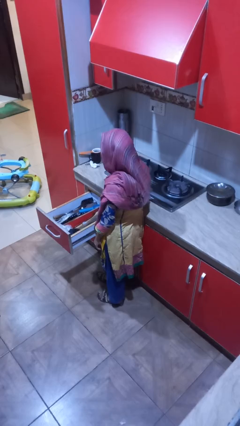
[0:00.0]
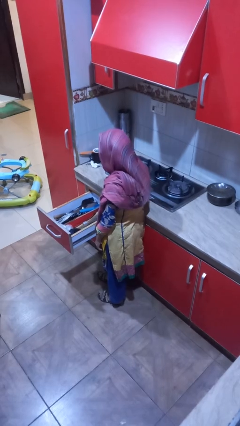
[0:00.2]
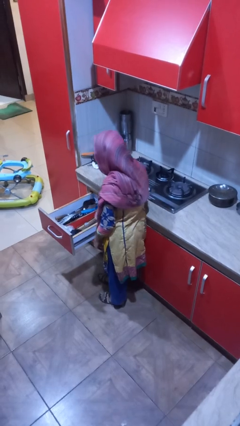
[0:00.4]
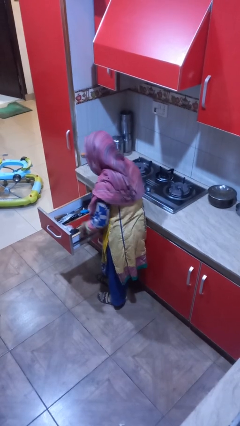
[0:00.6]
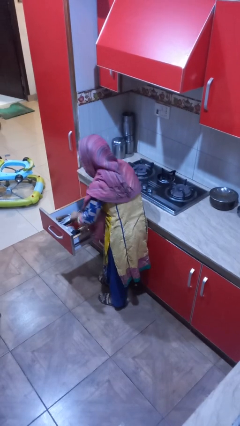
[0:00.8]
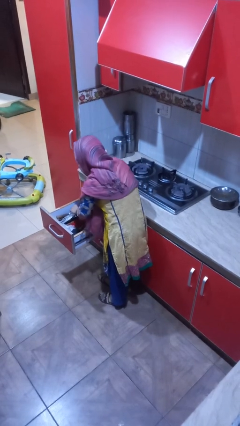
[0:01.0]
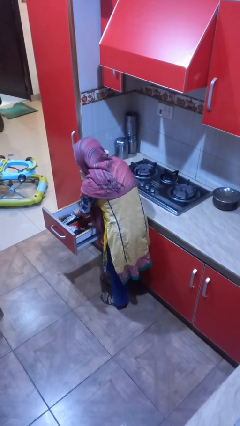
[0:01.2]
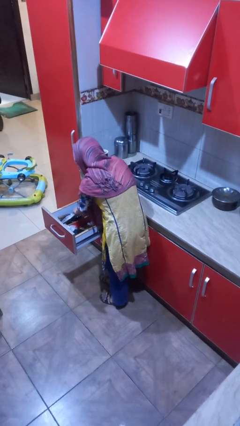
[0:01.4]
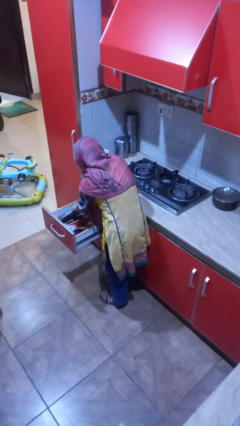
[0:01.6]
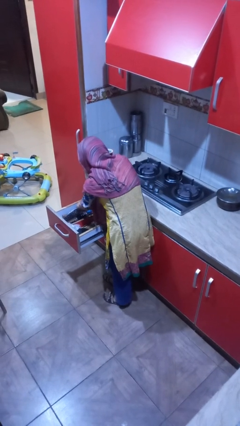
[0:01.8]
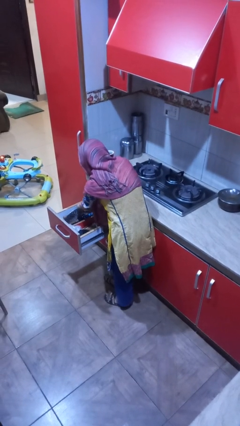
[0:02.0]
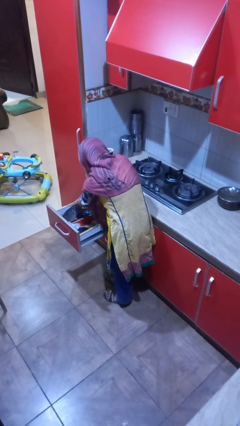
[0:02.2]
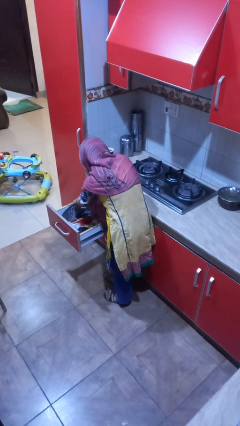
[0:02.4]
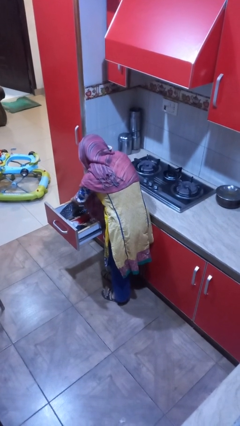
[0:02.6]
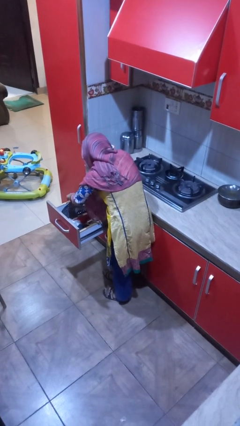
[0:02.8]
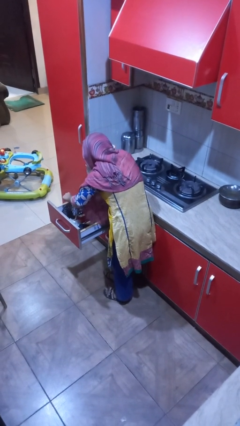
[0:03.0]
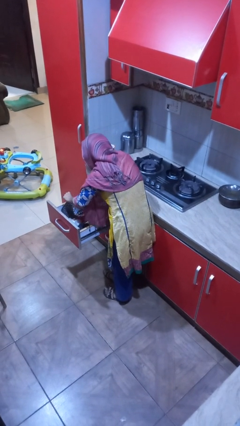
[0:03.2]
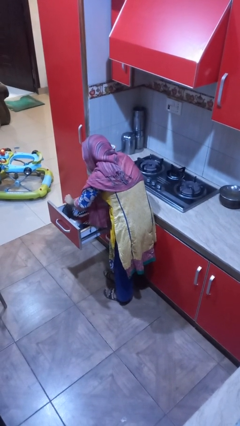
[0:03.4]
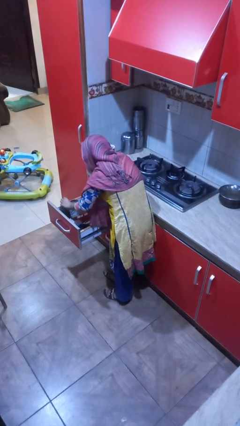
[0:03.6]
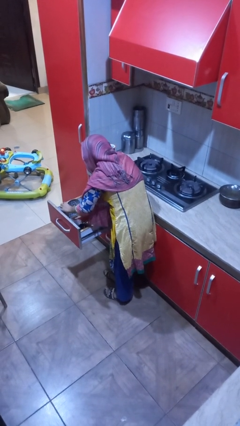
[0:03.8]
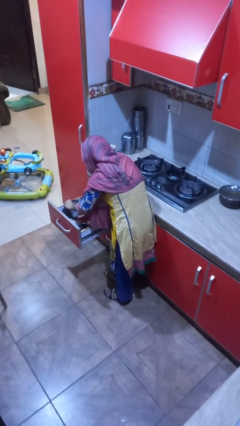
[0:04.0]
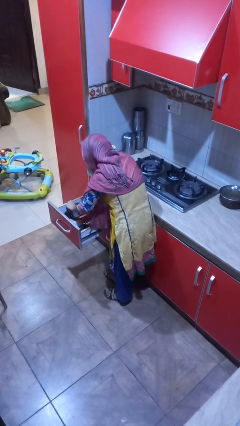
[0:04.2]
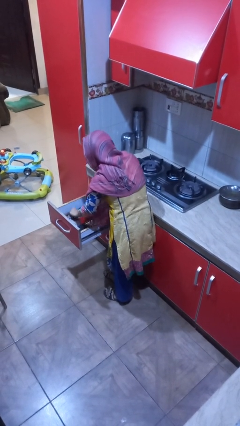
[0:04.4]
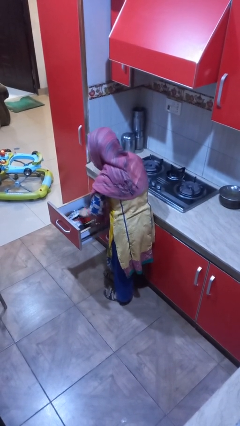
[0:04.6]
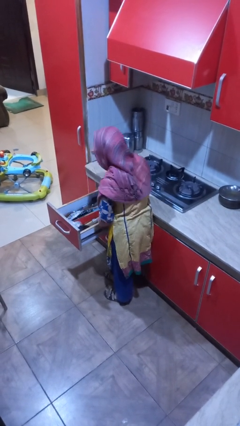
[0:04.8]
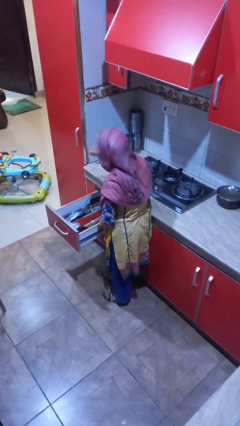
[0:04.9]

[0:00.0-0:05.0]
person searches in kitchen drawer

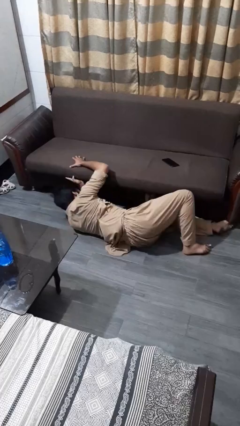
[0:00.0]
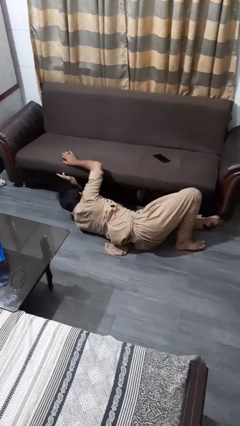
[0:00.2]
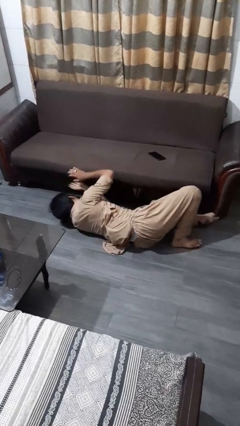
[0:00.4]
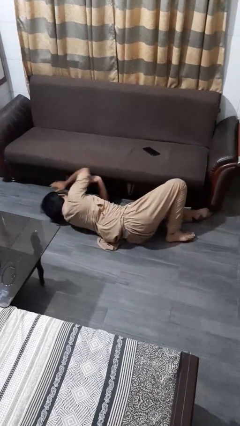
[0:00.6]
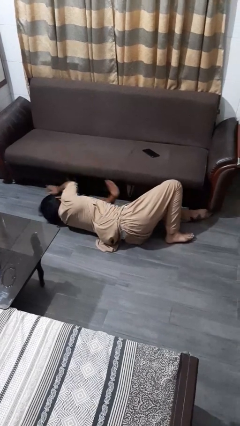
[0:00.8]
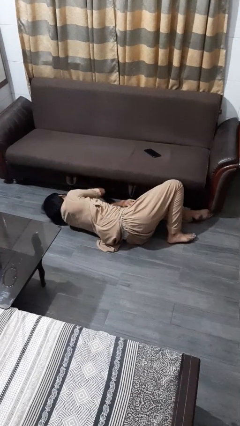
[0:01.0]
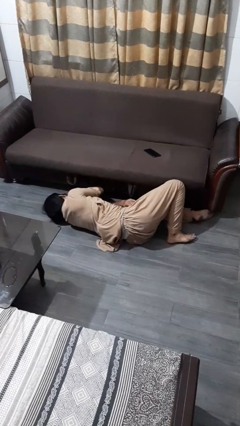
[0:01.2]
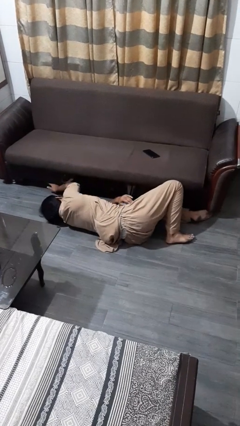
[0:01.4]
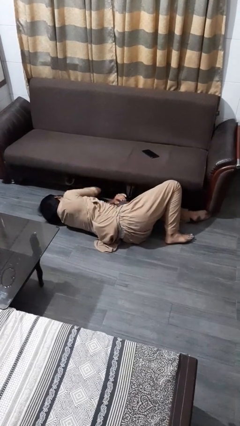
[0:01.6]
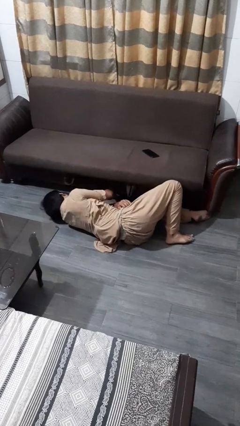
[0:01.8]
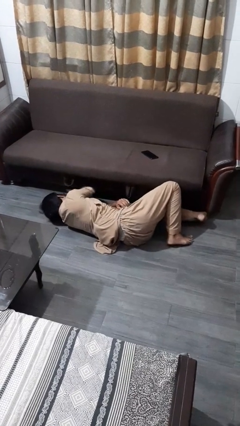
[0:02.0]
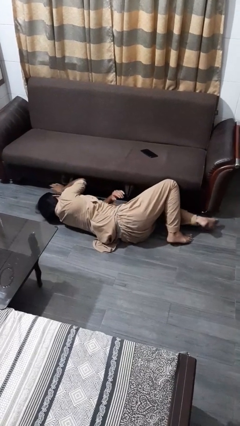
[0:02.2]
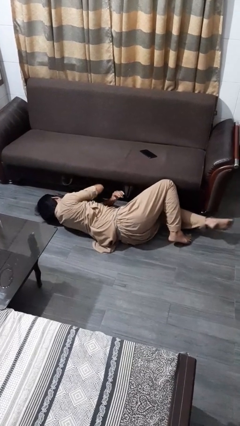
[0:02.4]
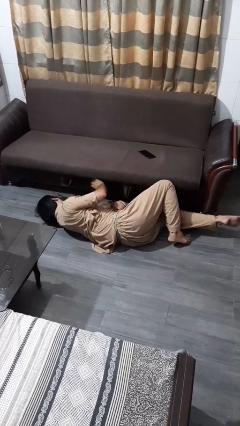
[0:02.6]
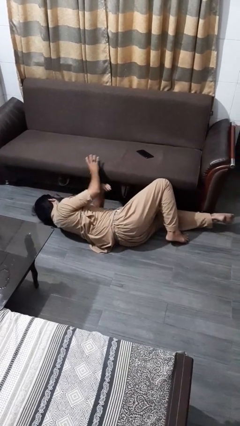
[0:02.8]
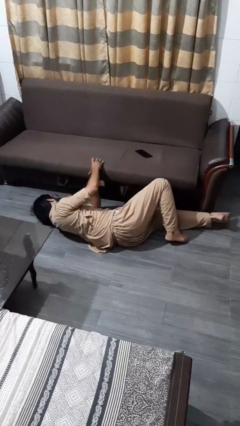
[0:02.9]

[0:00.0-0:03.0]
person searches under couch

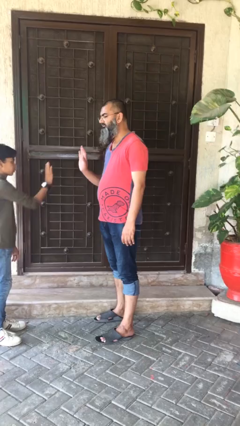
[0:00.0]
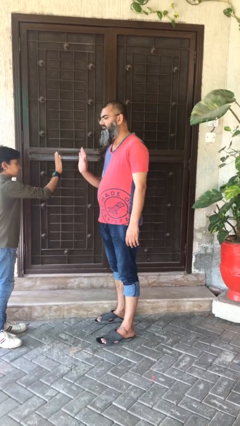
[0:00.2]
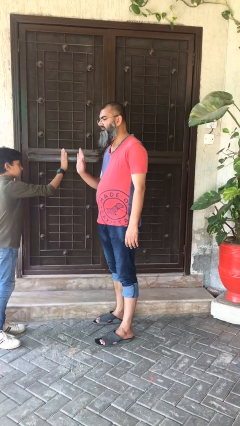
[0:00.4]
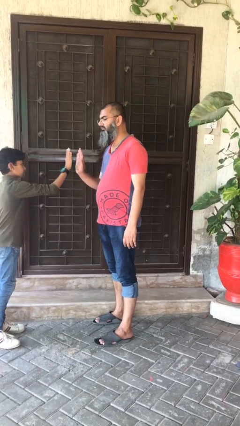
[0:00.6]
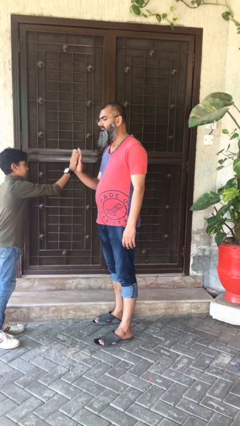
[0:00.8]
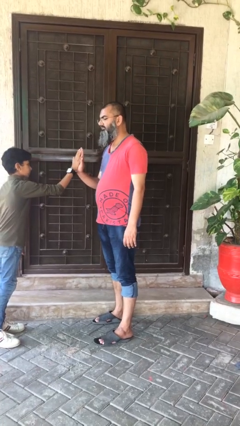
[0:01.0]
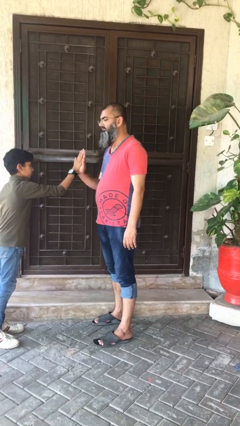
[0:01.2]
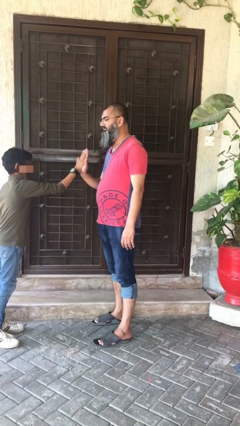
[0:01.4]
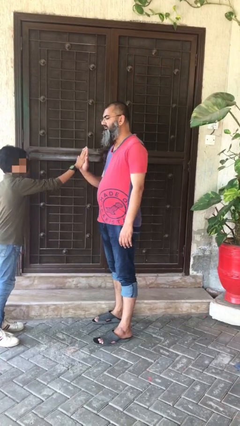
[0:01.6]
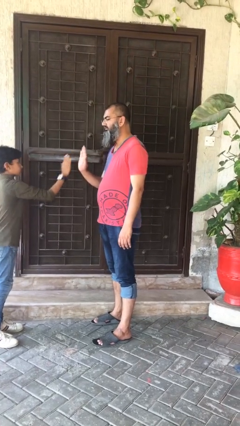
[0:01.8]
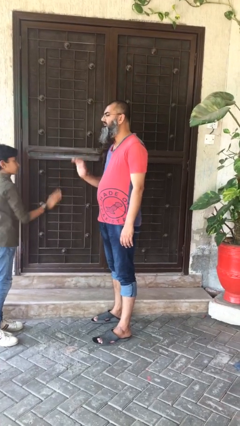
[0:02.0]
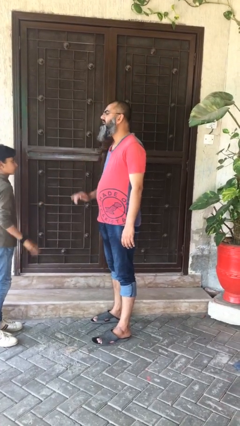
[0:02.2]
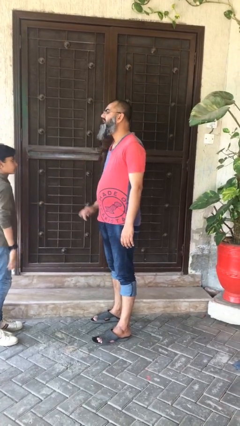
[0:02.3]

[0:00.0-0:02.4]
person highfives hand

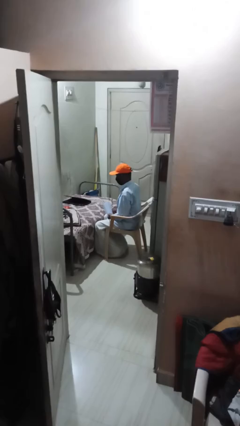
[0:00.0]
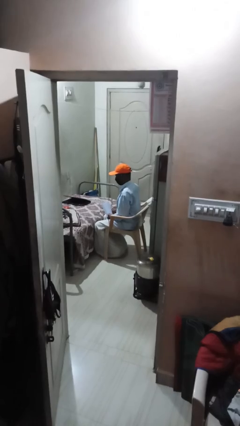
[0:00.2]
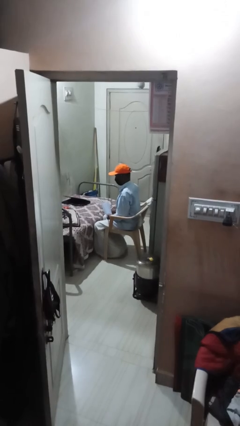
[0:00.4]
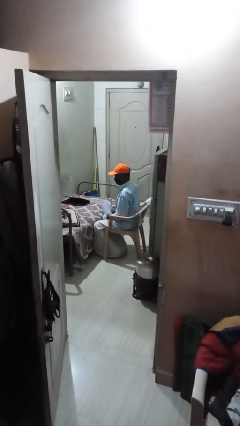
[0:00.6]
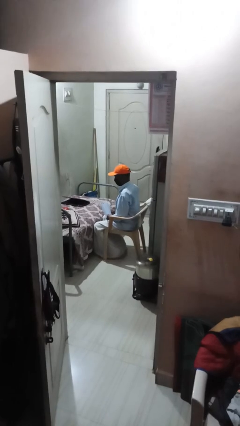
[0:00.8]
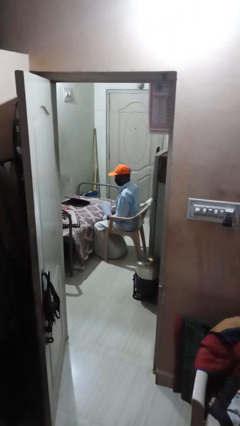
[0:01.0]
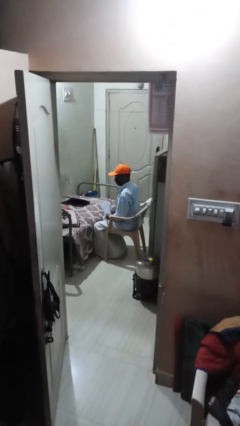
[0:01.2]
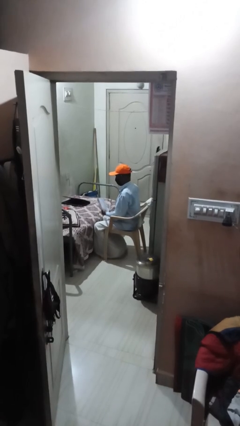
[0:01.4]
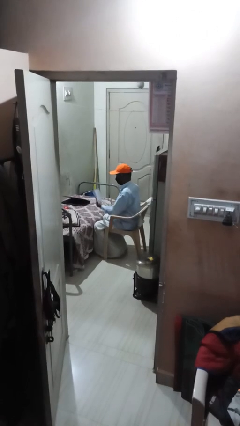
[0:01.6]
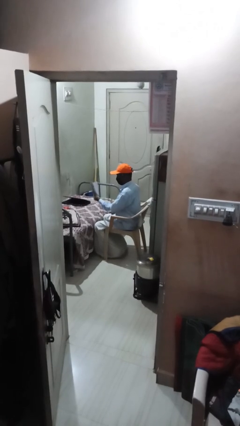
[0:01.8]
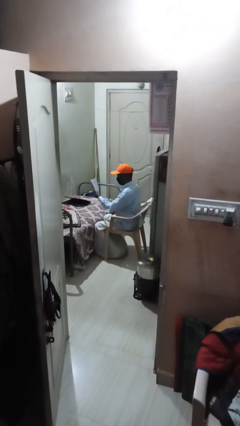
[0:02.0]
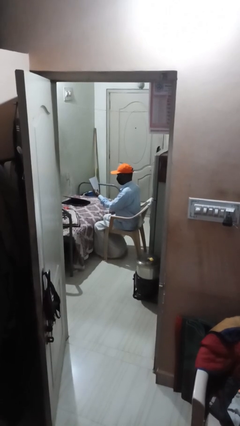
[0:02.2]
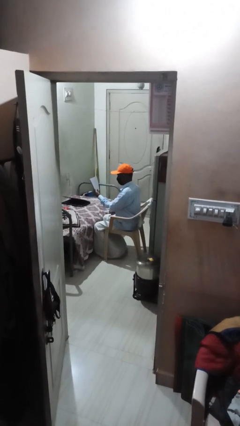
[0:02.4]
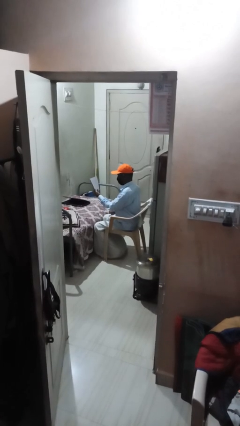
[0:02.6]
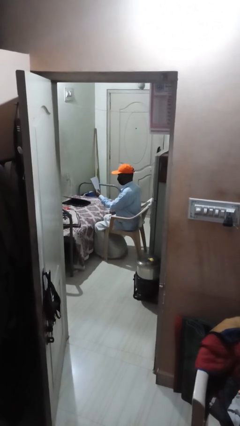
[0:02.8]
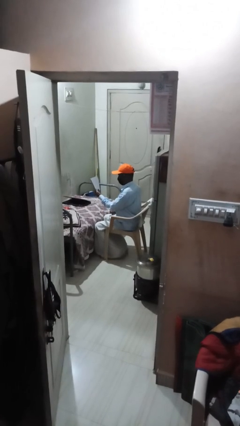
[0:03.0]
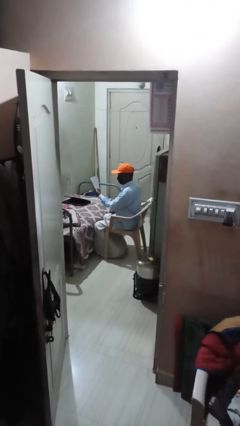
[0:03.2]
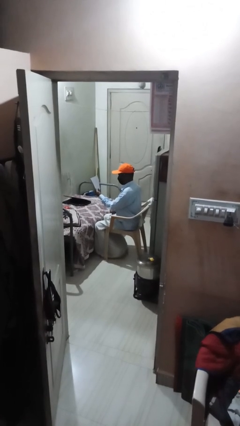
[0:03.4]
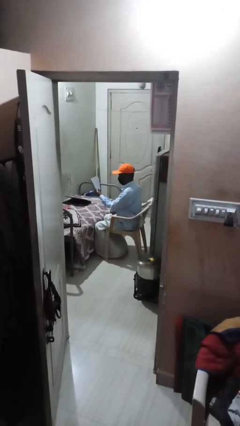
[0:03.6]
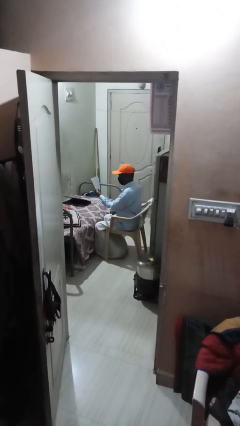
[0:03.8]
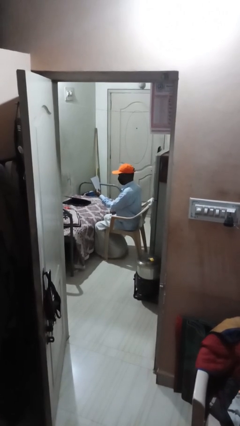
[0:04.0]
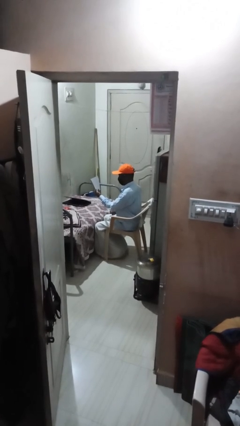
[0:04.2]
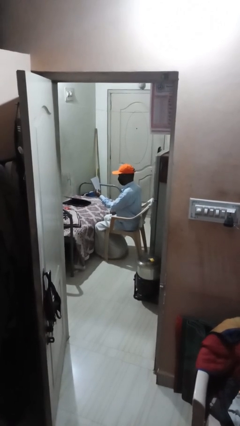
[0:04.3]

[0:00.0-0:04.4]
person reads document

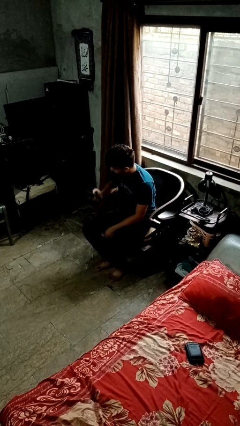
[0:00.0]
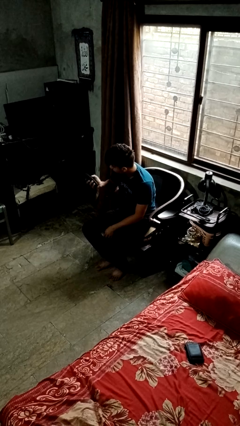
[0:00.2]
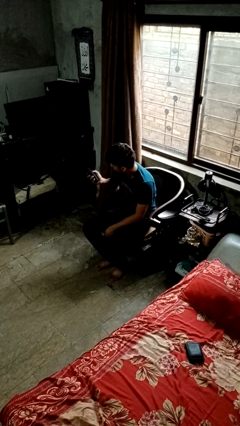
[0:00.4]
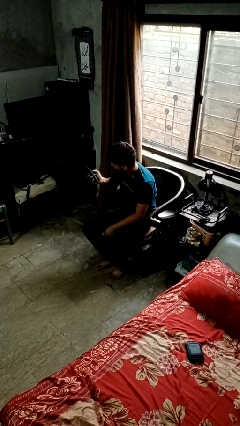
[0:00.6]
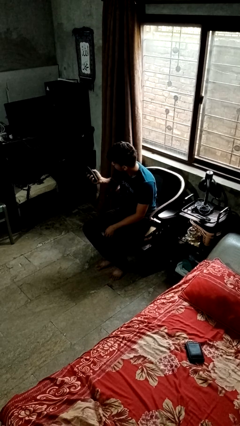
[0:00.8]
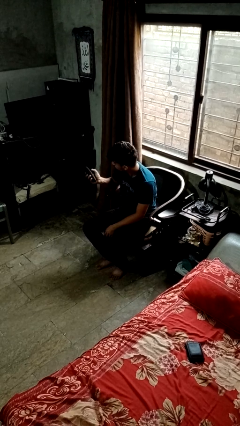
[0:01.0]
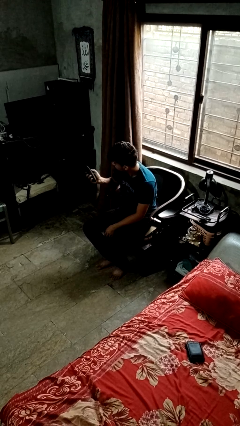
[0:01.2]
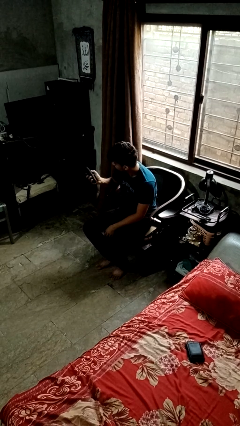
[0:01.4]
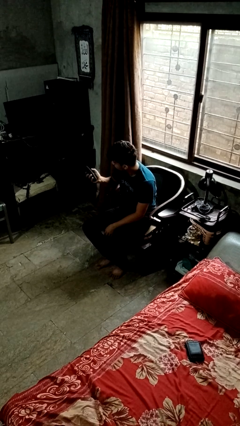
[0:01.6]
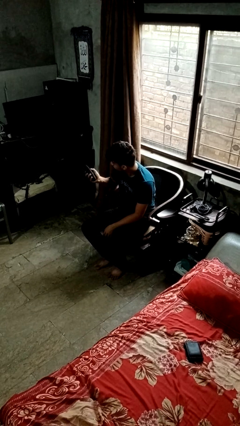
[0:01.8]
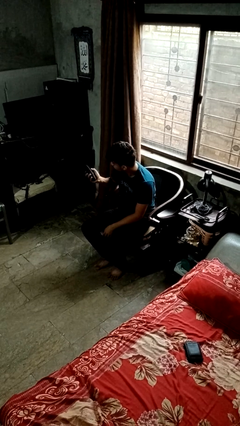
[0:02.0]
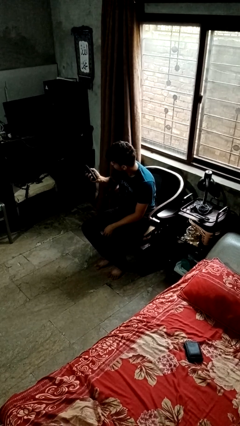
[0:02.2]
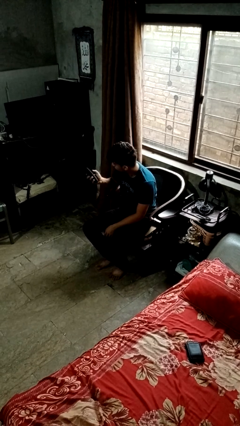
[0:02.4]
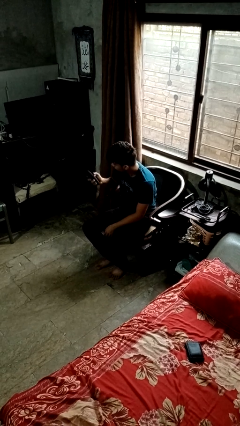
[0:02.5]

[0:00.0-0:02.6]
person uses television remote

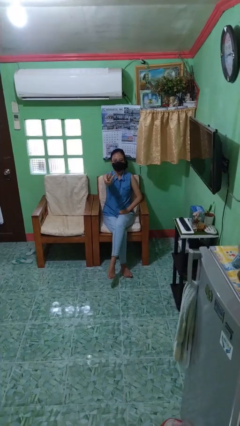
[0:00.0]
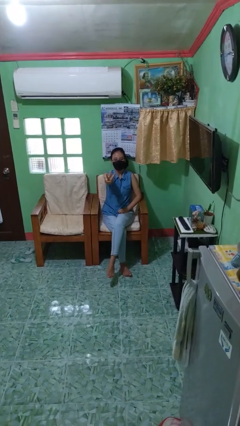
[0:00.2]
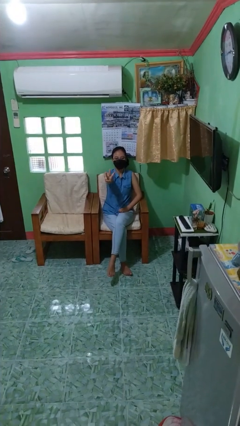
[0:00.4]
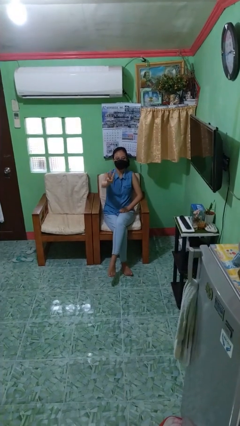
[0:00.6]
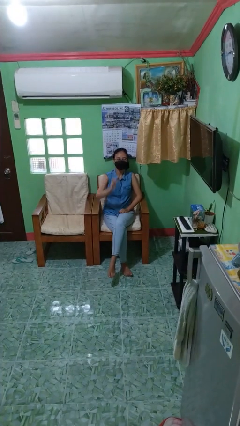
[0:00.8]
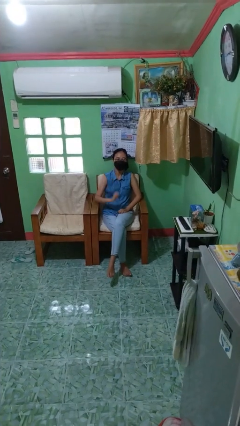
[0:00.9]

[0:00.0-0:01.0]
person gestures number three
